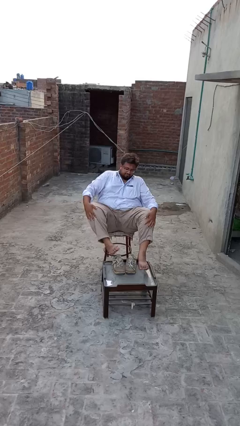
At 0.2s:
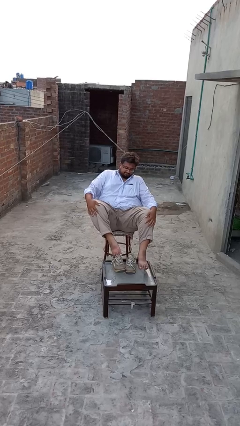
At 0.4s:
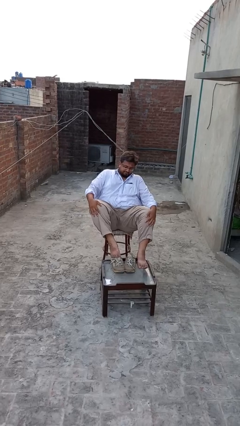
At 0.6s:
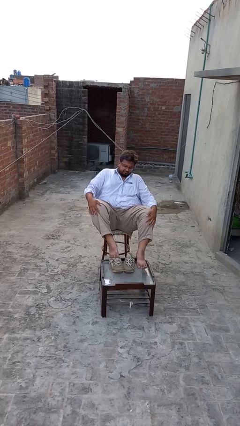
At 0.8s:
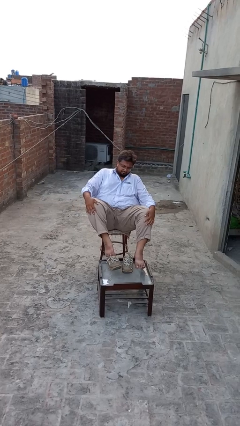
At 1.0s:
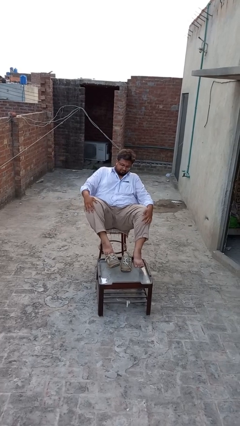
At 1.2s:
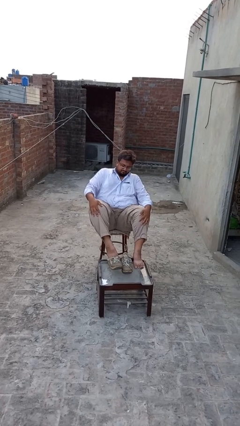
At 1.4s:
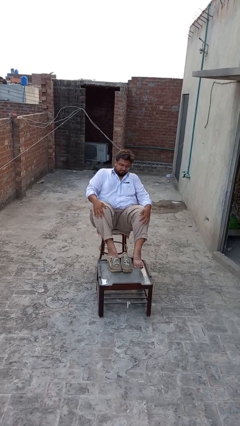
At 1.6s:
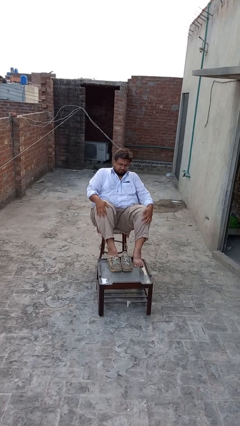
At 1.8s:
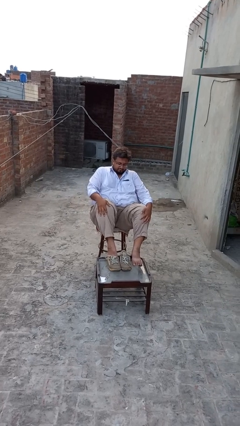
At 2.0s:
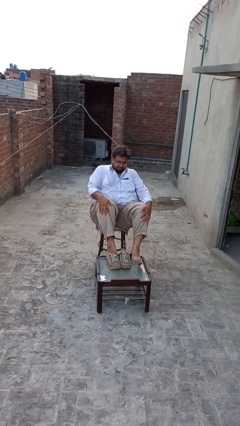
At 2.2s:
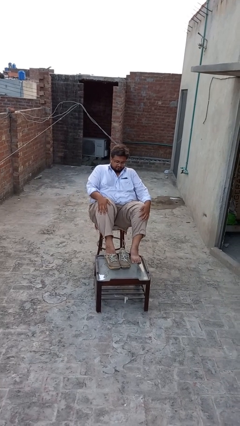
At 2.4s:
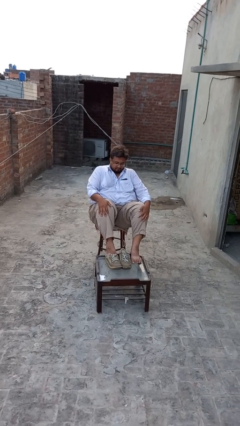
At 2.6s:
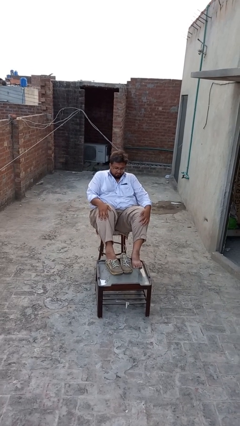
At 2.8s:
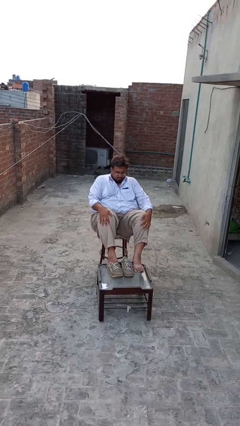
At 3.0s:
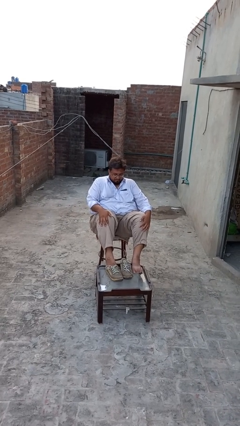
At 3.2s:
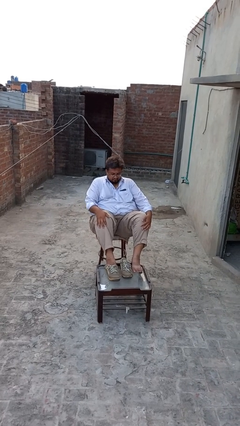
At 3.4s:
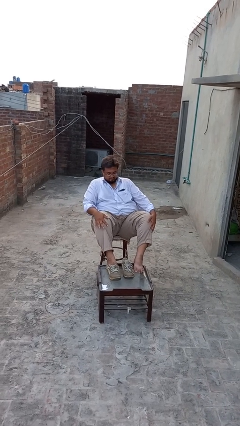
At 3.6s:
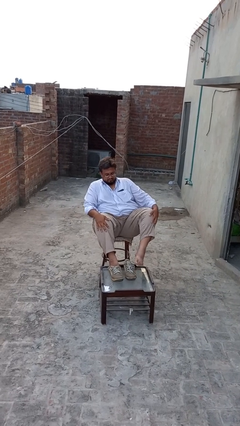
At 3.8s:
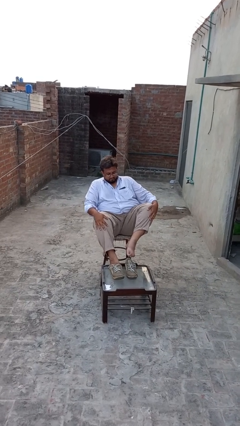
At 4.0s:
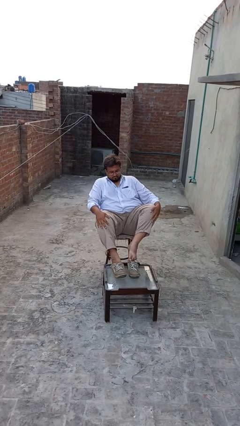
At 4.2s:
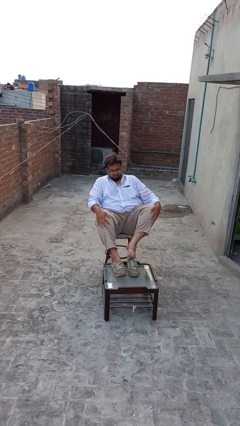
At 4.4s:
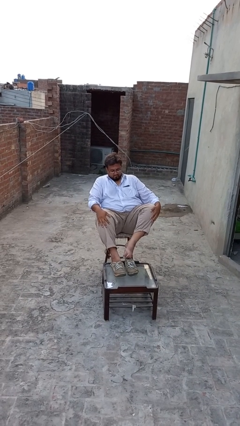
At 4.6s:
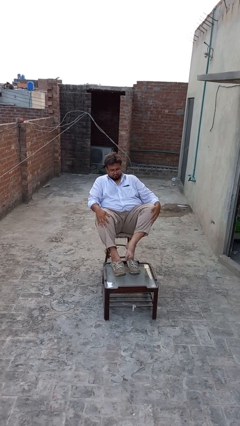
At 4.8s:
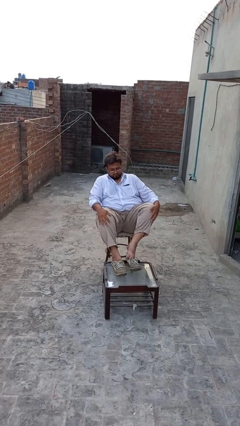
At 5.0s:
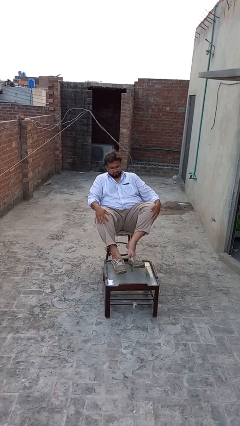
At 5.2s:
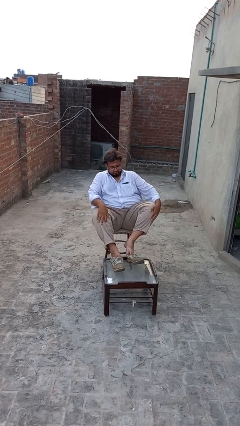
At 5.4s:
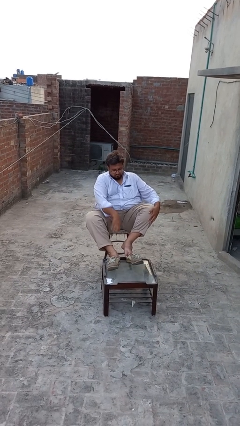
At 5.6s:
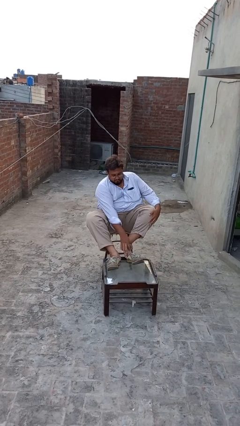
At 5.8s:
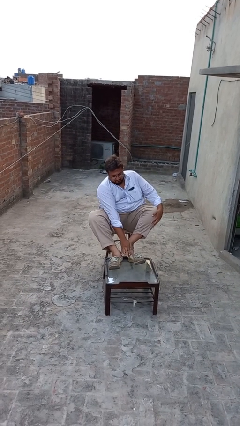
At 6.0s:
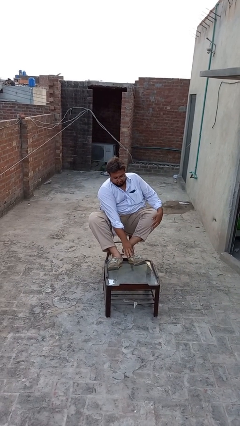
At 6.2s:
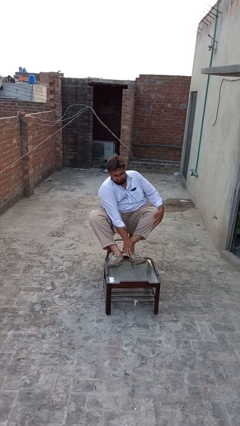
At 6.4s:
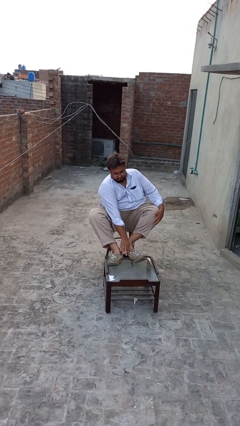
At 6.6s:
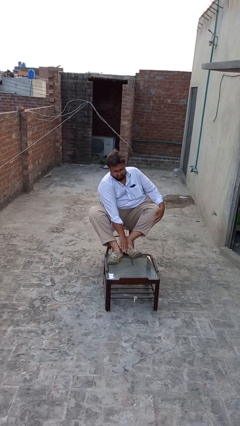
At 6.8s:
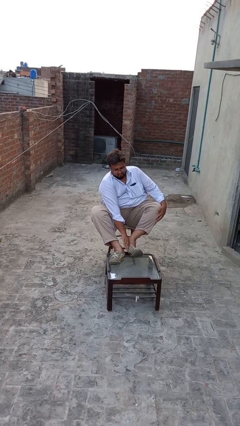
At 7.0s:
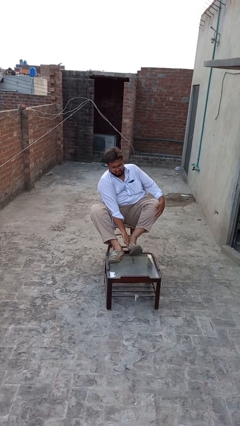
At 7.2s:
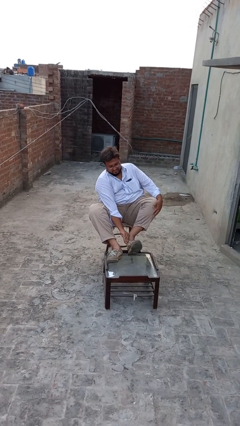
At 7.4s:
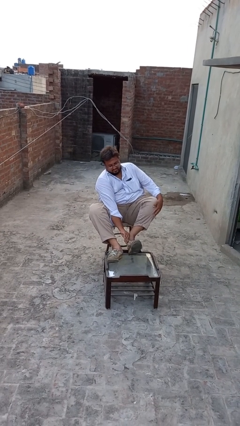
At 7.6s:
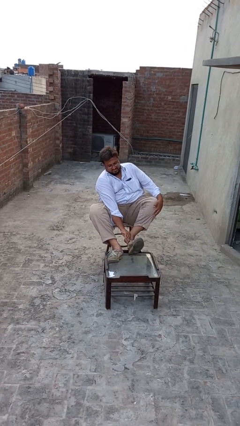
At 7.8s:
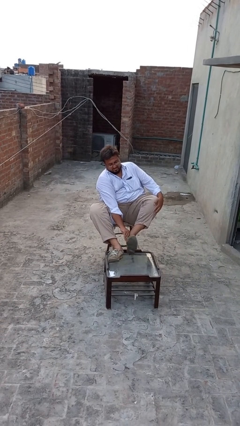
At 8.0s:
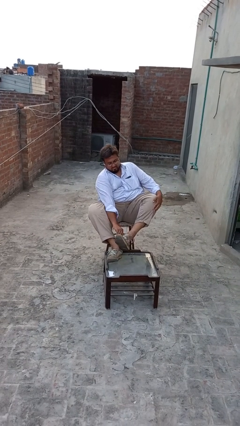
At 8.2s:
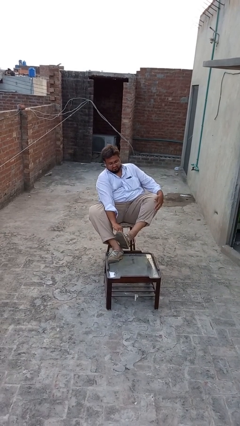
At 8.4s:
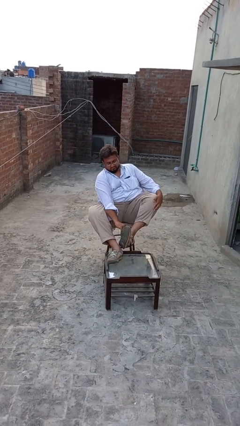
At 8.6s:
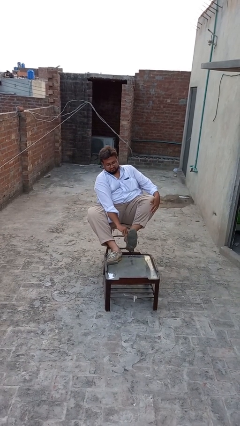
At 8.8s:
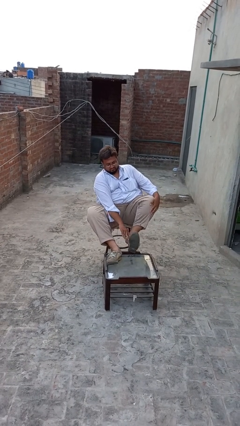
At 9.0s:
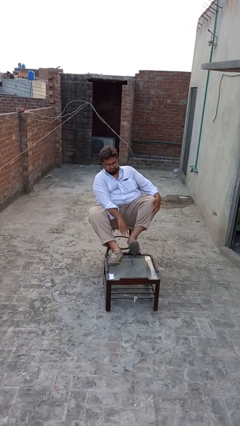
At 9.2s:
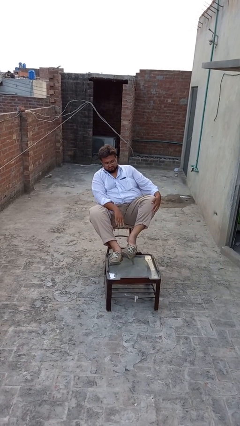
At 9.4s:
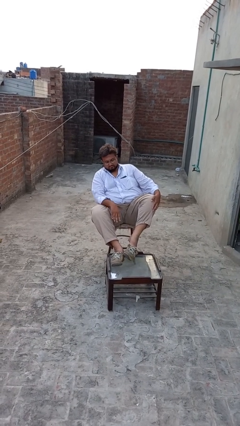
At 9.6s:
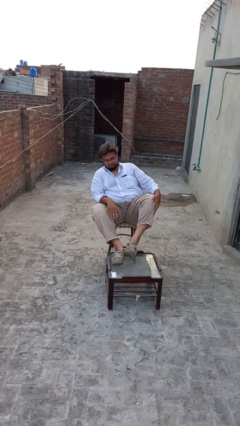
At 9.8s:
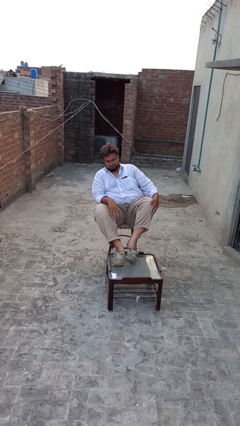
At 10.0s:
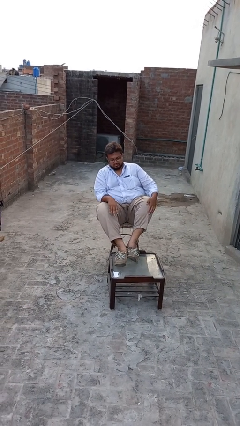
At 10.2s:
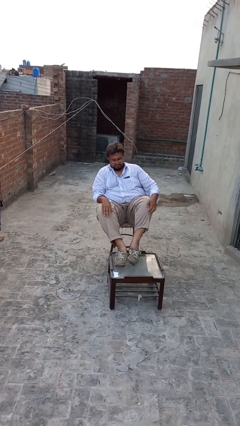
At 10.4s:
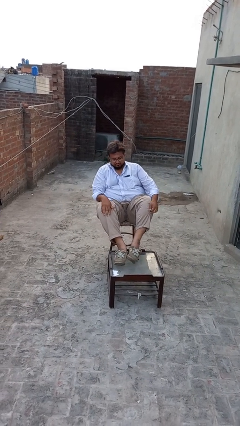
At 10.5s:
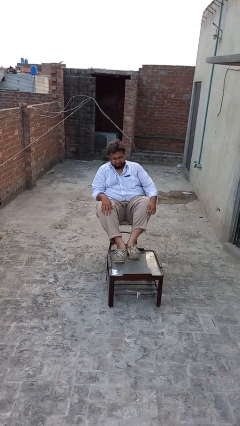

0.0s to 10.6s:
person puts on shoes

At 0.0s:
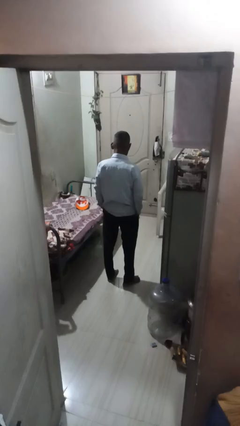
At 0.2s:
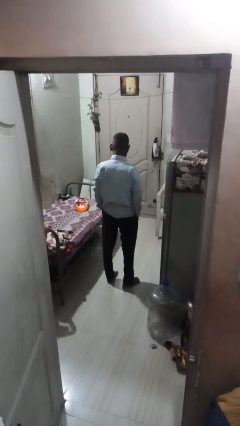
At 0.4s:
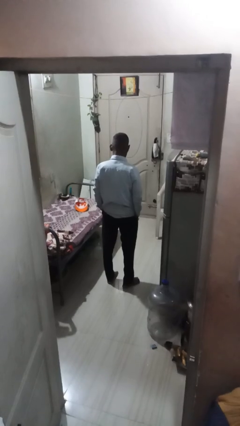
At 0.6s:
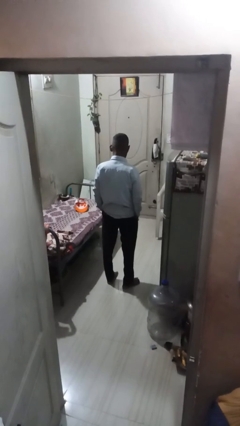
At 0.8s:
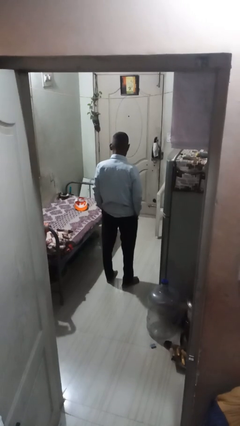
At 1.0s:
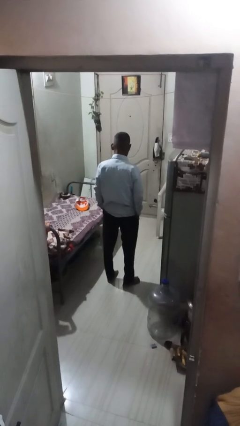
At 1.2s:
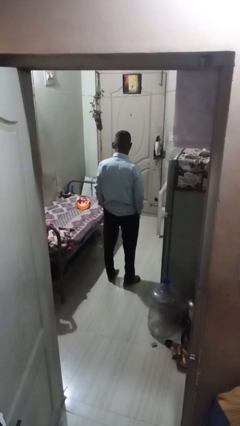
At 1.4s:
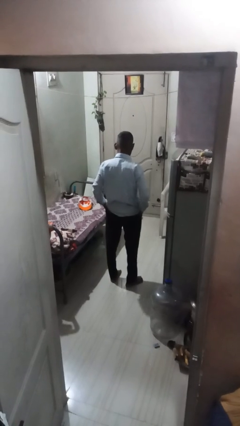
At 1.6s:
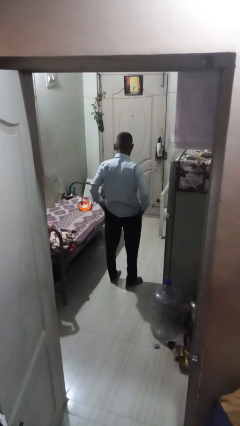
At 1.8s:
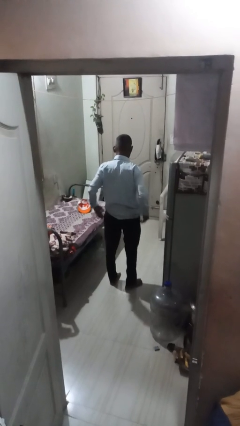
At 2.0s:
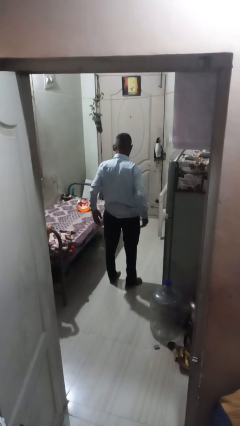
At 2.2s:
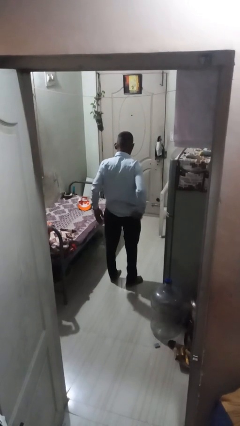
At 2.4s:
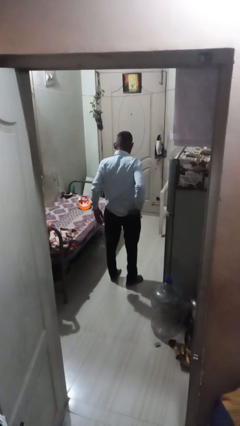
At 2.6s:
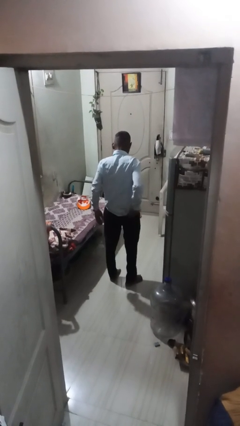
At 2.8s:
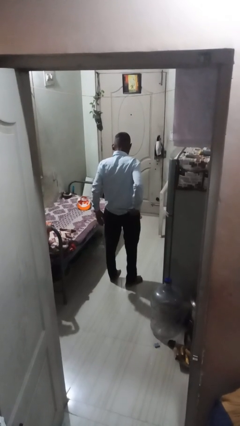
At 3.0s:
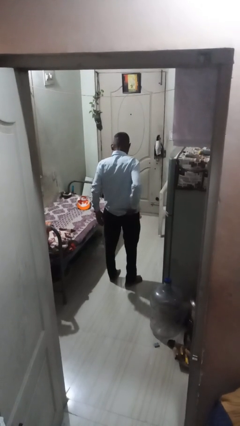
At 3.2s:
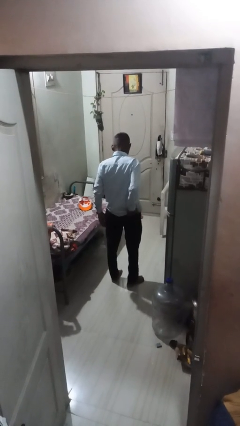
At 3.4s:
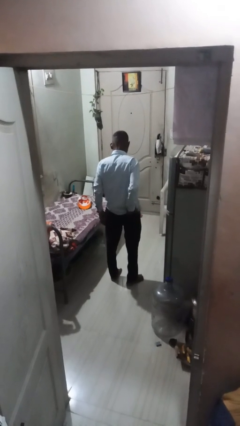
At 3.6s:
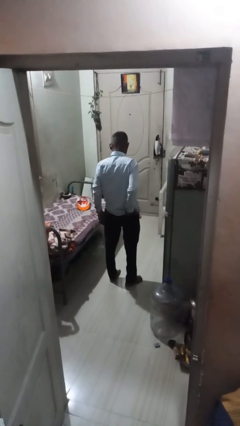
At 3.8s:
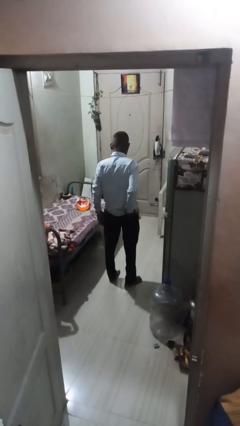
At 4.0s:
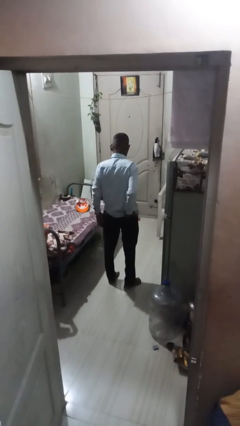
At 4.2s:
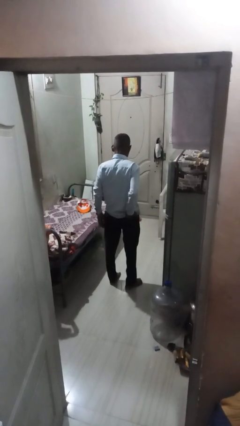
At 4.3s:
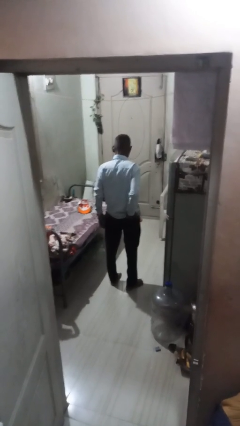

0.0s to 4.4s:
person puts hands in back pockets

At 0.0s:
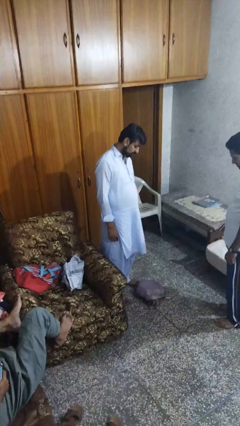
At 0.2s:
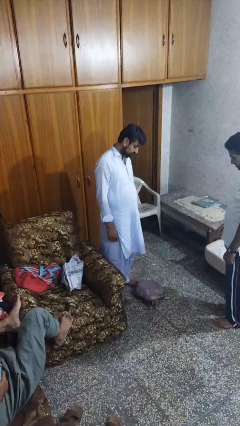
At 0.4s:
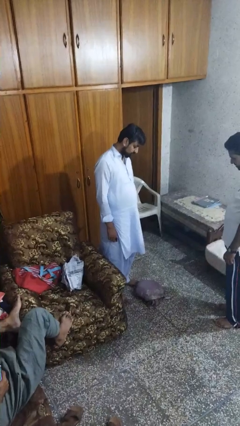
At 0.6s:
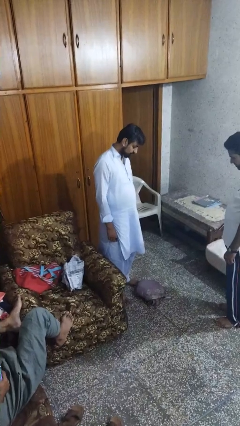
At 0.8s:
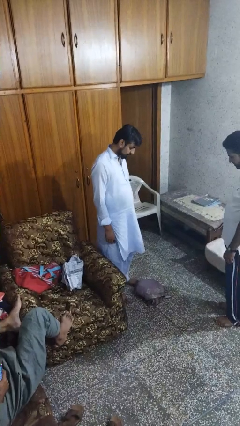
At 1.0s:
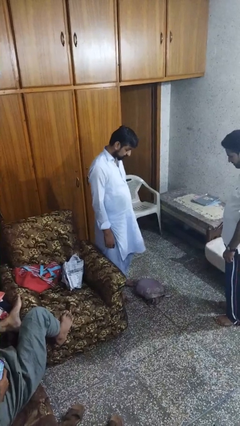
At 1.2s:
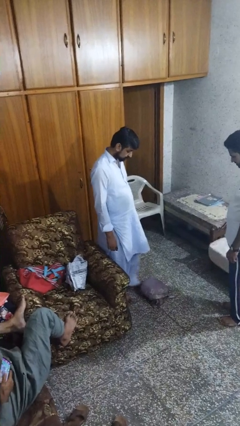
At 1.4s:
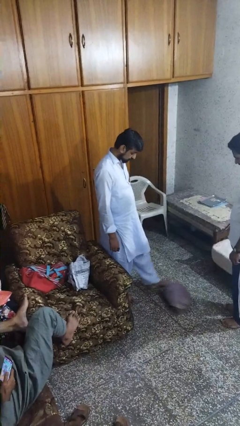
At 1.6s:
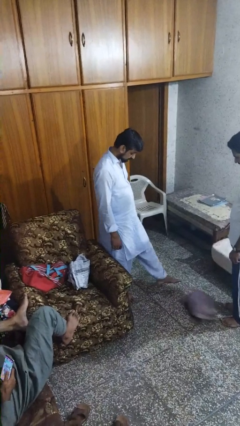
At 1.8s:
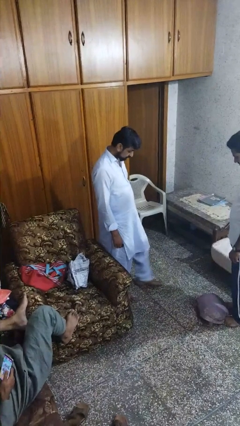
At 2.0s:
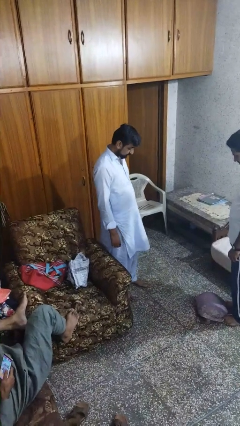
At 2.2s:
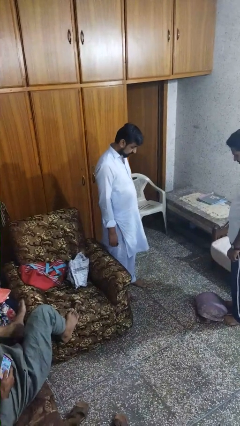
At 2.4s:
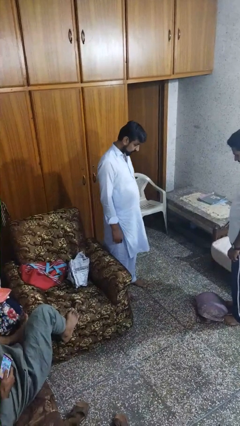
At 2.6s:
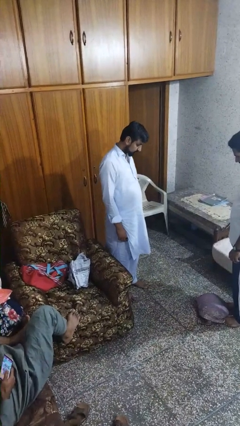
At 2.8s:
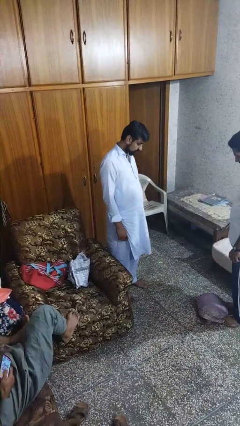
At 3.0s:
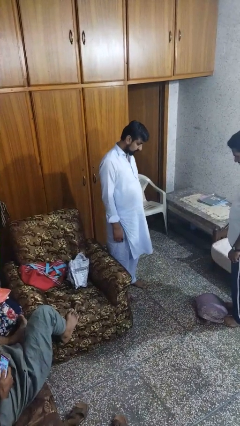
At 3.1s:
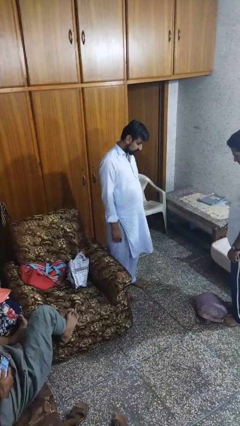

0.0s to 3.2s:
person kicks object to person
